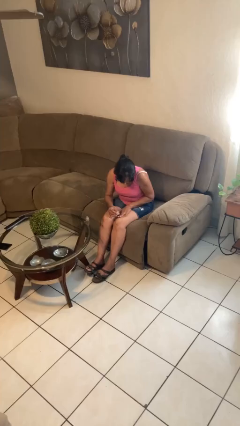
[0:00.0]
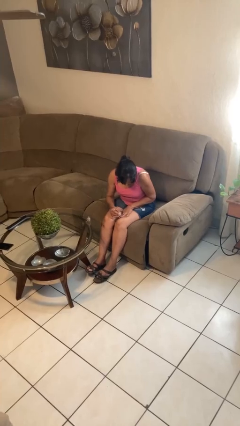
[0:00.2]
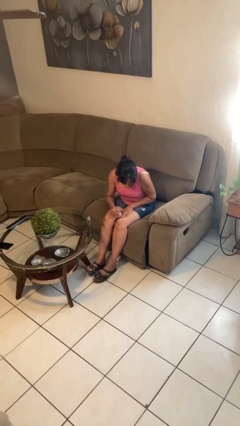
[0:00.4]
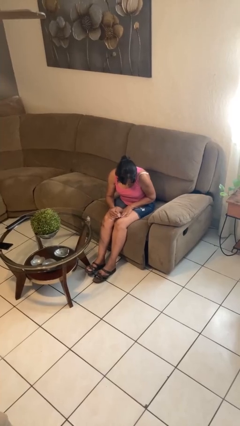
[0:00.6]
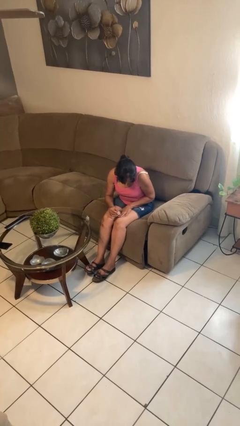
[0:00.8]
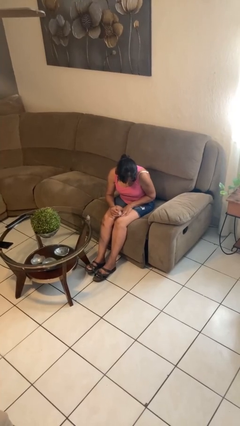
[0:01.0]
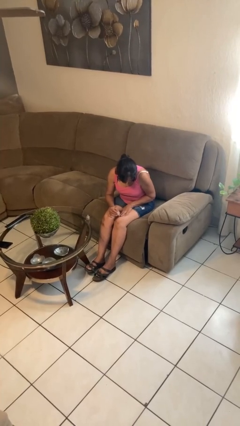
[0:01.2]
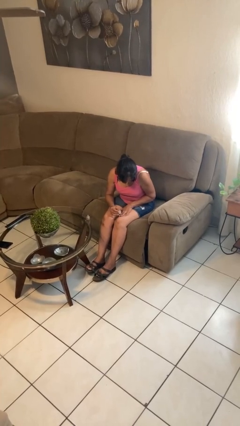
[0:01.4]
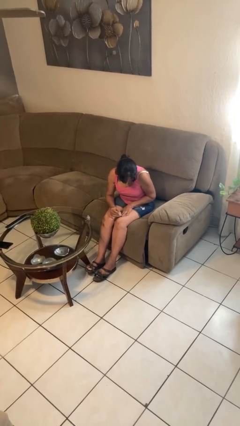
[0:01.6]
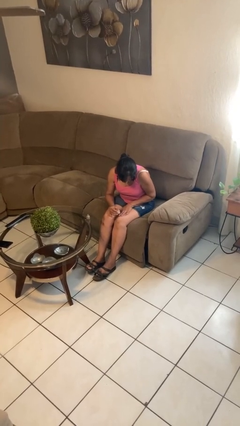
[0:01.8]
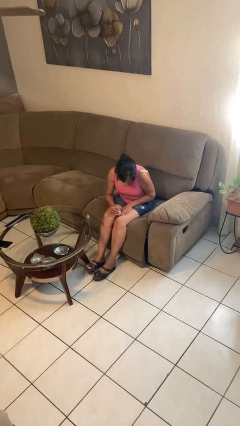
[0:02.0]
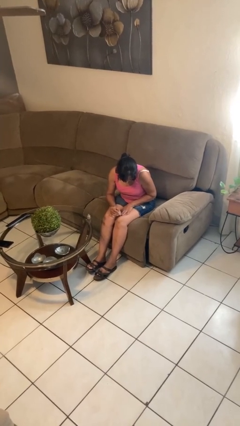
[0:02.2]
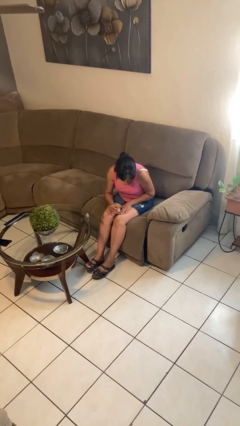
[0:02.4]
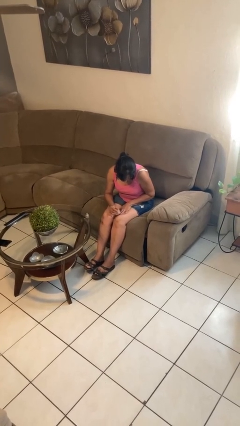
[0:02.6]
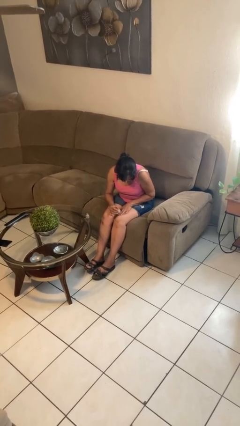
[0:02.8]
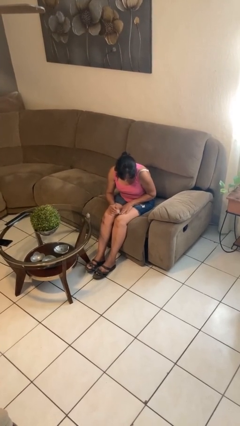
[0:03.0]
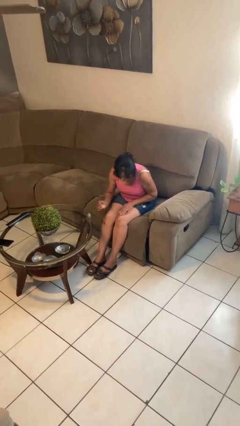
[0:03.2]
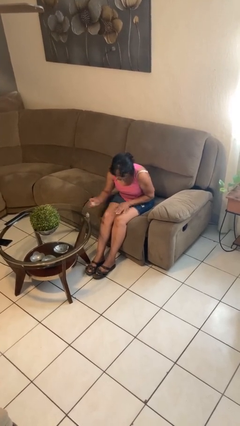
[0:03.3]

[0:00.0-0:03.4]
person paints fingernails

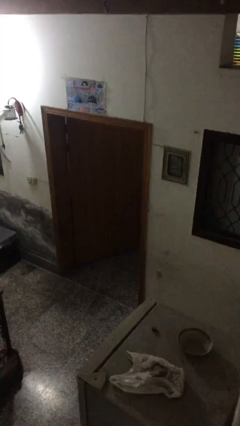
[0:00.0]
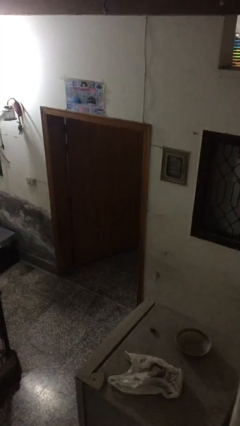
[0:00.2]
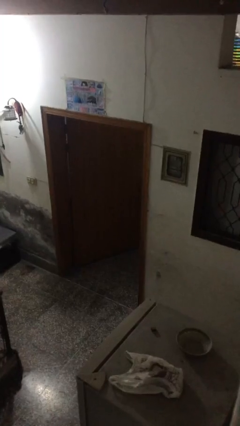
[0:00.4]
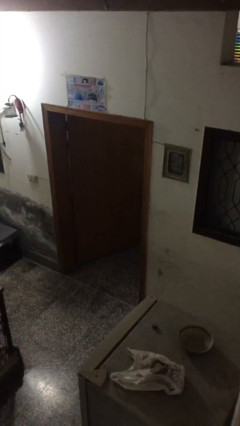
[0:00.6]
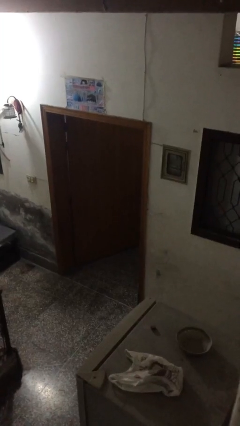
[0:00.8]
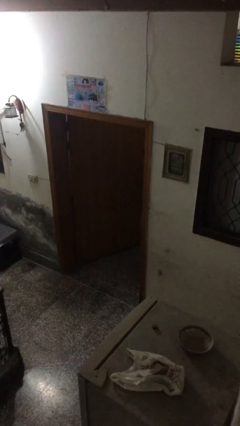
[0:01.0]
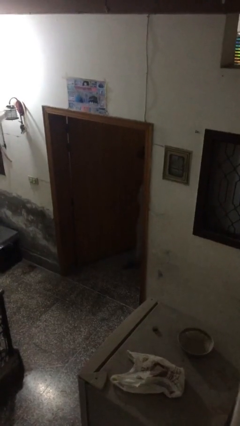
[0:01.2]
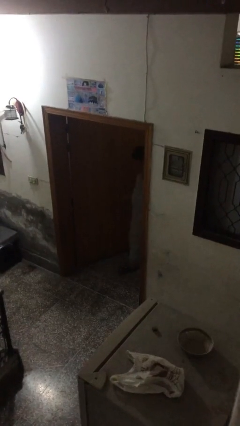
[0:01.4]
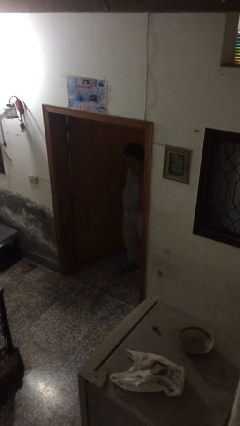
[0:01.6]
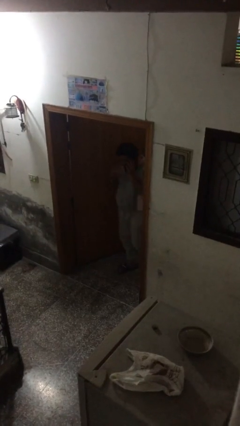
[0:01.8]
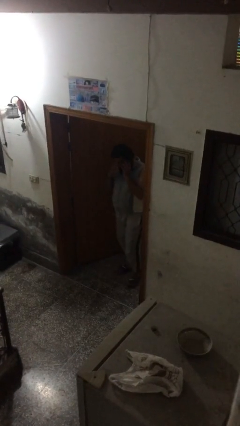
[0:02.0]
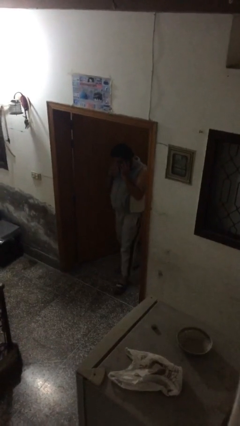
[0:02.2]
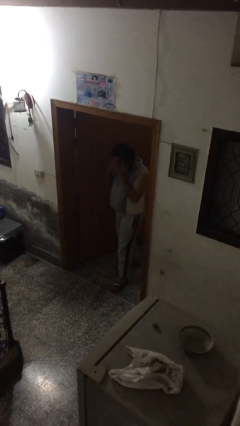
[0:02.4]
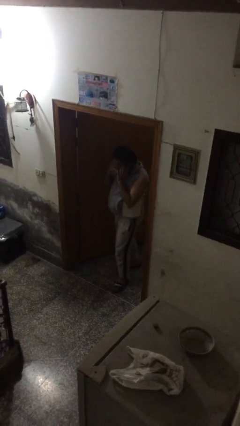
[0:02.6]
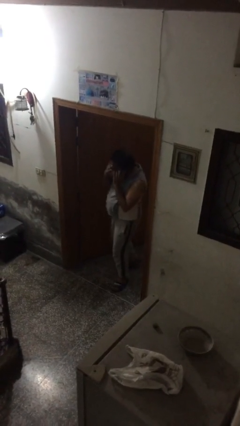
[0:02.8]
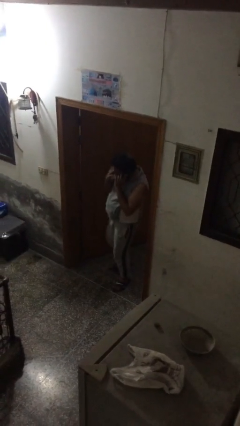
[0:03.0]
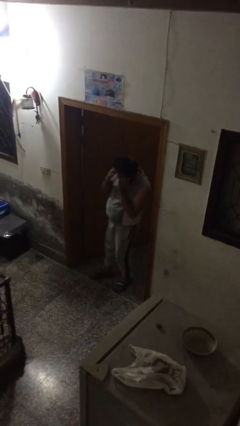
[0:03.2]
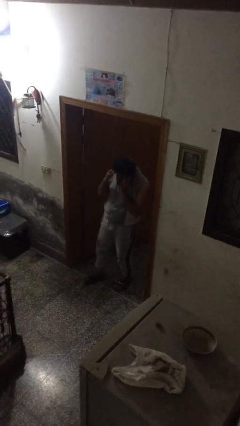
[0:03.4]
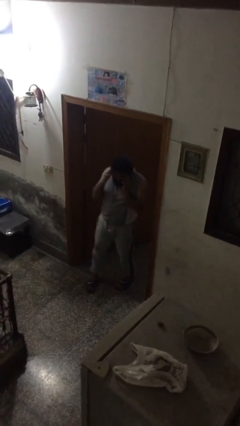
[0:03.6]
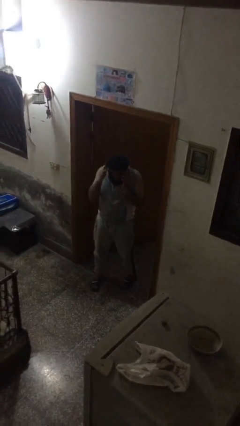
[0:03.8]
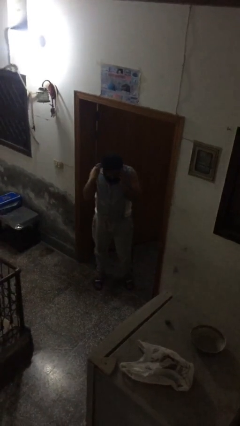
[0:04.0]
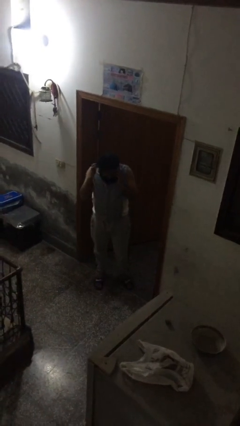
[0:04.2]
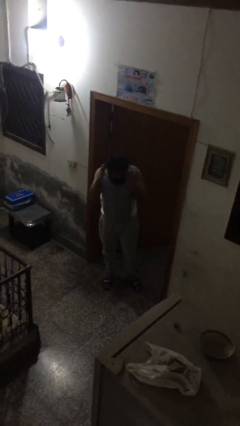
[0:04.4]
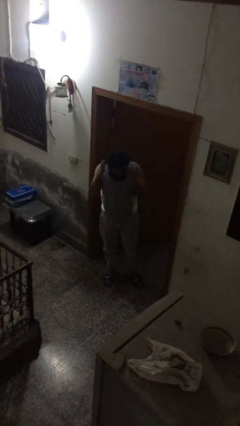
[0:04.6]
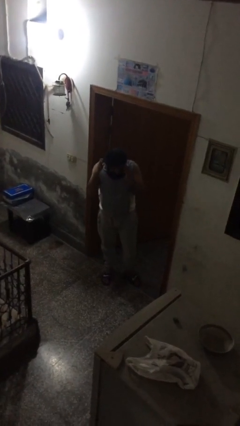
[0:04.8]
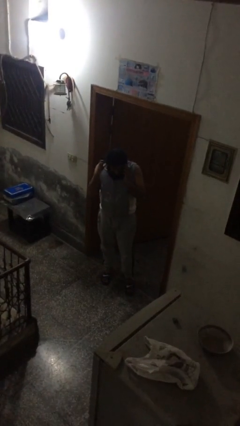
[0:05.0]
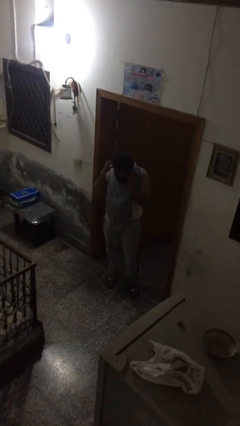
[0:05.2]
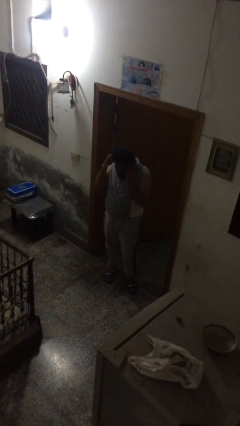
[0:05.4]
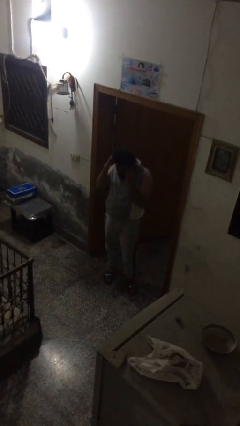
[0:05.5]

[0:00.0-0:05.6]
person enters scene through structure

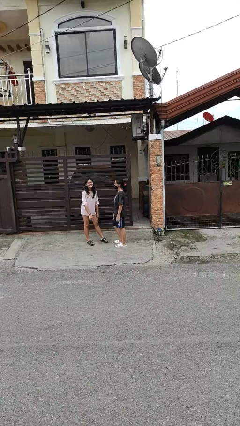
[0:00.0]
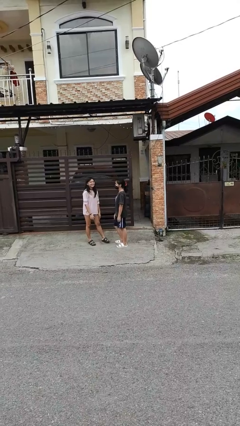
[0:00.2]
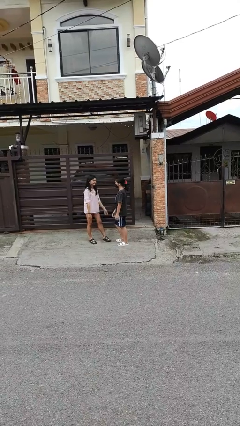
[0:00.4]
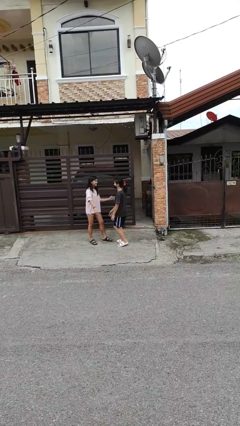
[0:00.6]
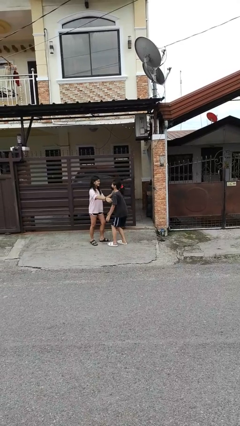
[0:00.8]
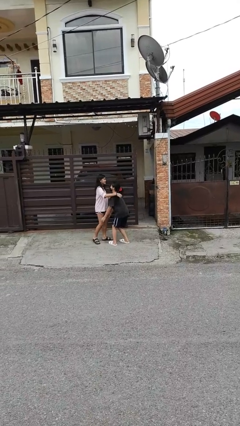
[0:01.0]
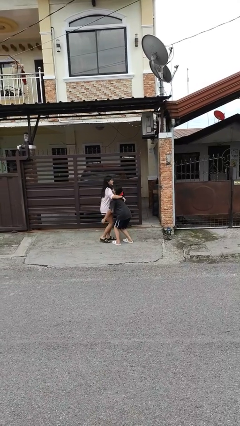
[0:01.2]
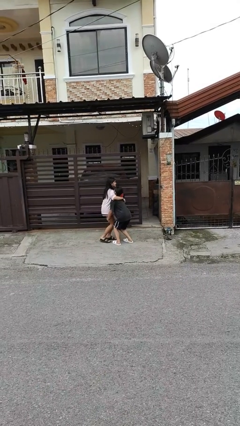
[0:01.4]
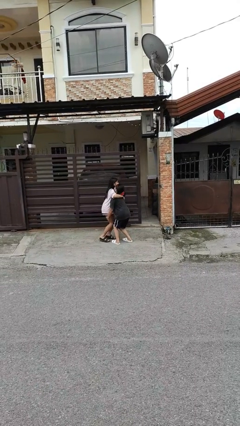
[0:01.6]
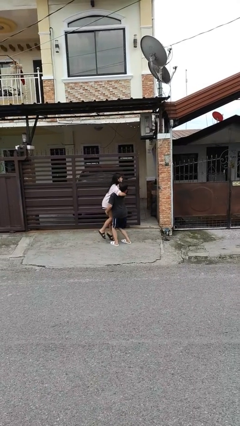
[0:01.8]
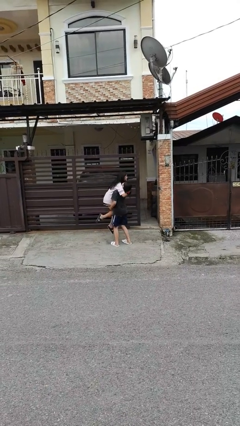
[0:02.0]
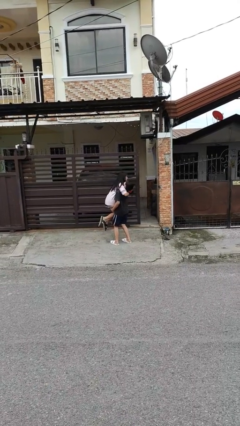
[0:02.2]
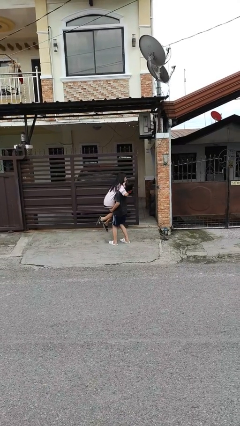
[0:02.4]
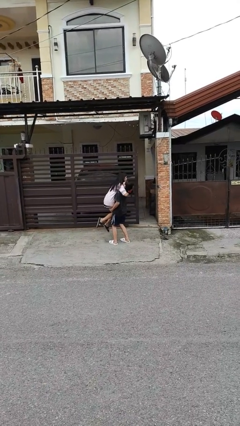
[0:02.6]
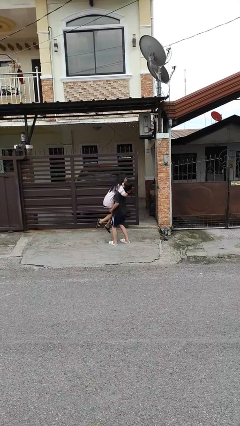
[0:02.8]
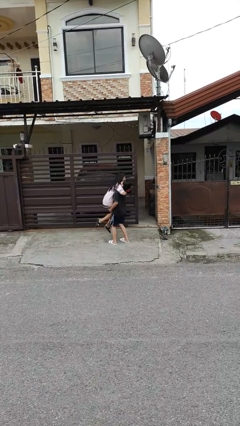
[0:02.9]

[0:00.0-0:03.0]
person picks up person

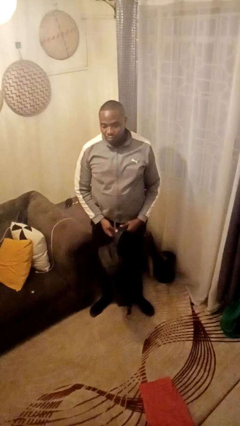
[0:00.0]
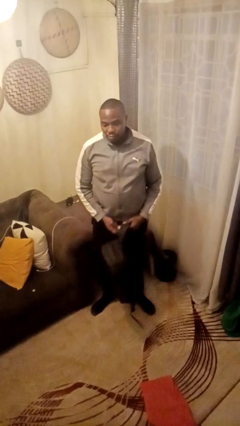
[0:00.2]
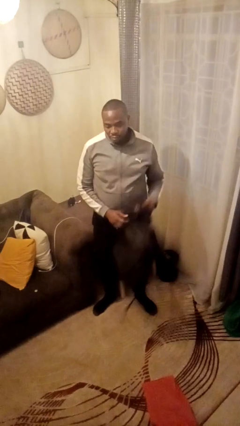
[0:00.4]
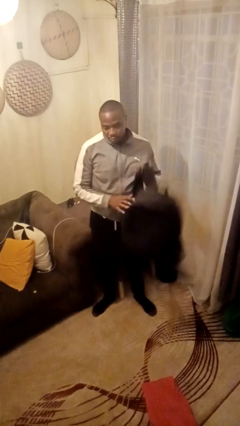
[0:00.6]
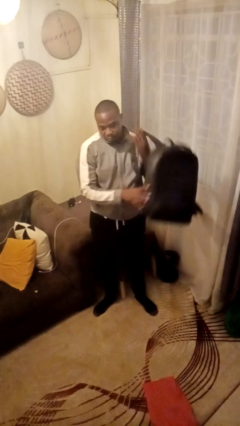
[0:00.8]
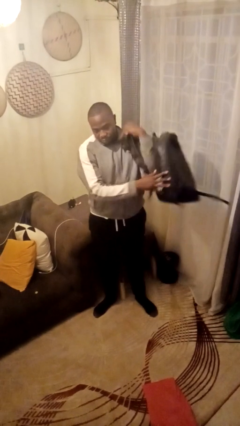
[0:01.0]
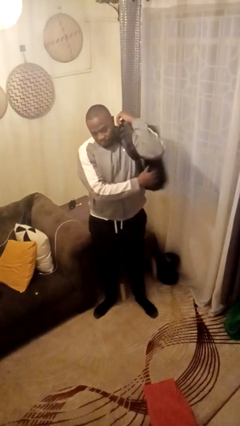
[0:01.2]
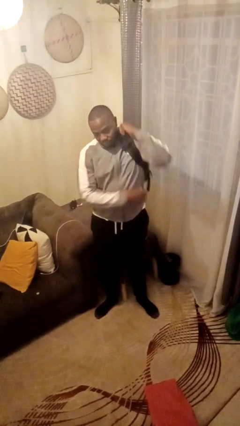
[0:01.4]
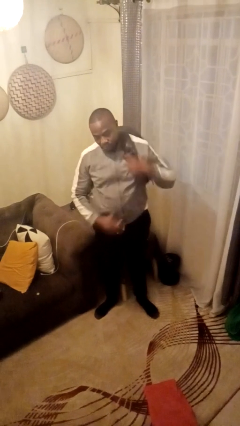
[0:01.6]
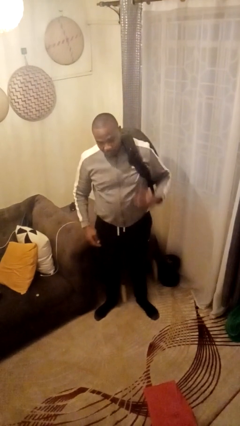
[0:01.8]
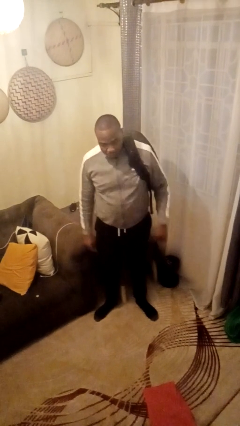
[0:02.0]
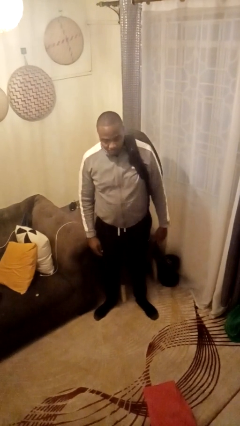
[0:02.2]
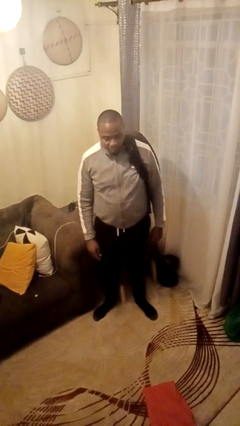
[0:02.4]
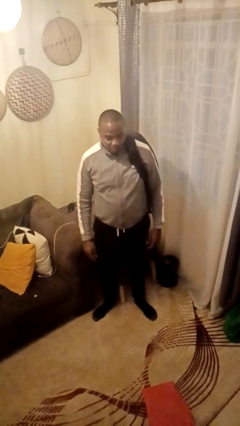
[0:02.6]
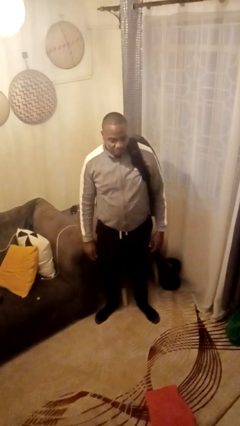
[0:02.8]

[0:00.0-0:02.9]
person puts on backpack

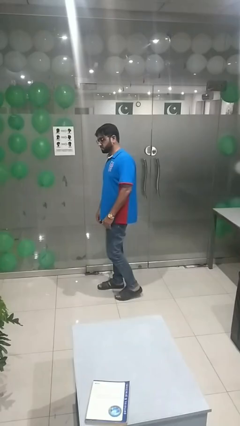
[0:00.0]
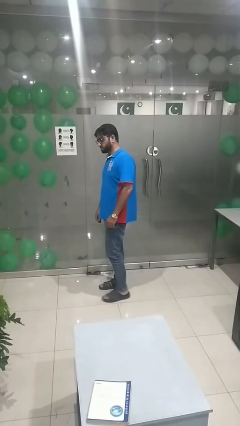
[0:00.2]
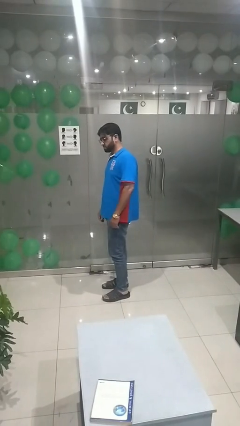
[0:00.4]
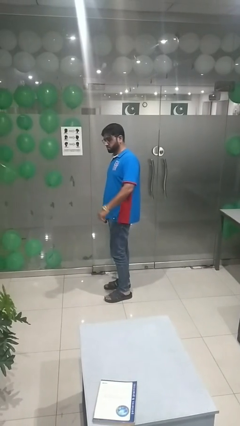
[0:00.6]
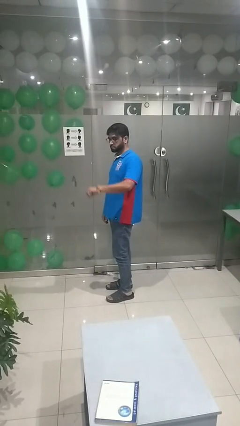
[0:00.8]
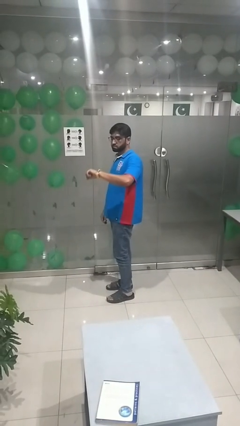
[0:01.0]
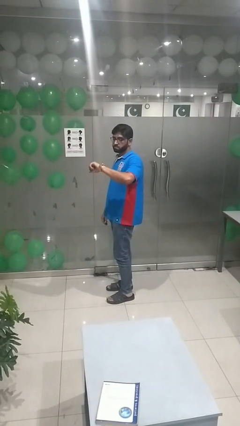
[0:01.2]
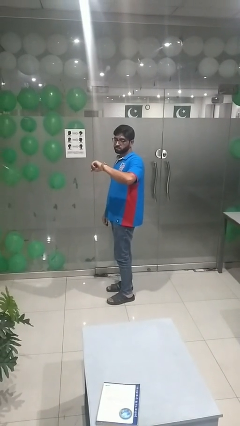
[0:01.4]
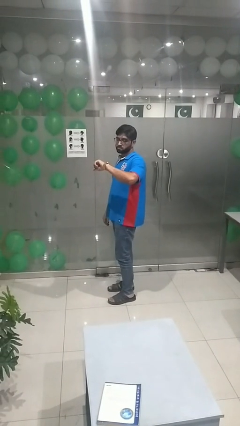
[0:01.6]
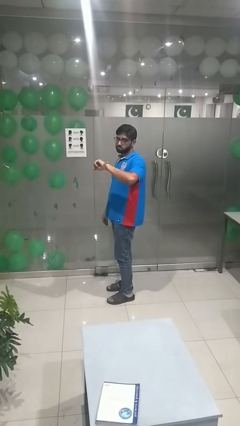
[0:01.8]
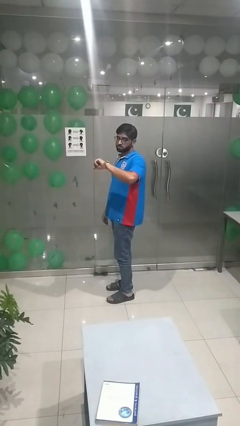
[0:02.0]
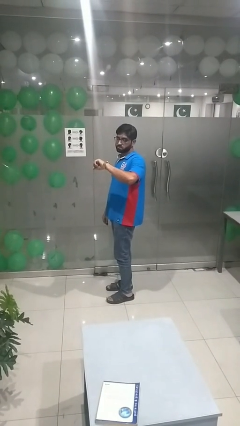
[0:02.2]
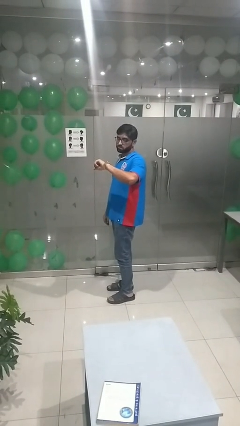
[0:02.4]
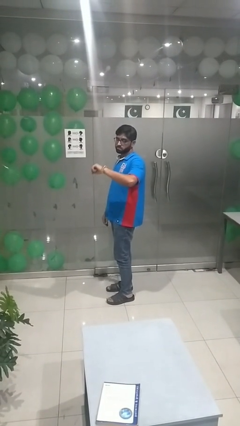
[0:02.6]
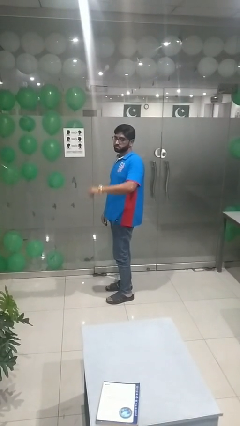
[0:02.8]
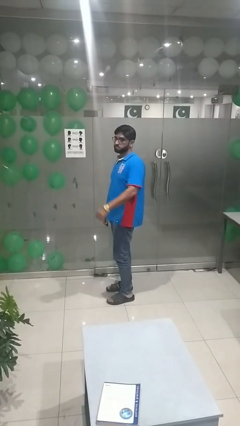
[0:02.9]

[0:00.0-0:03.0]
person looks at wristwatch
